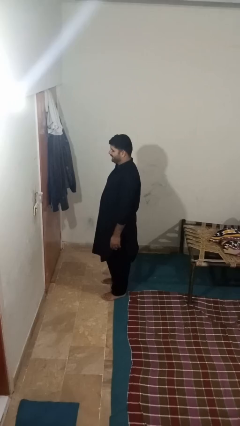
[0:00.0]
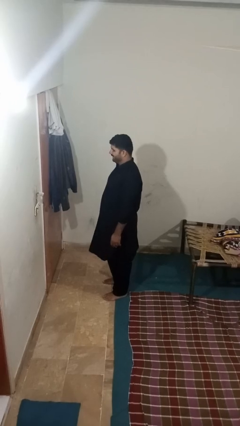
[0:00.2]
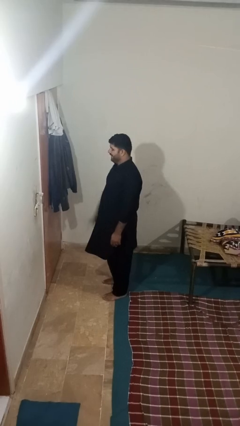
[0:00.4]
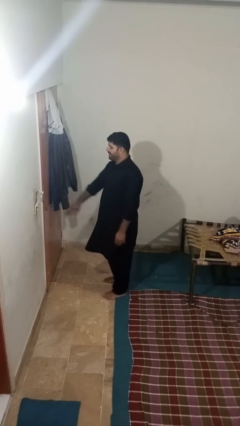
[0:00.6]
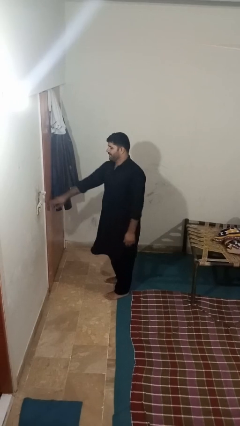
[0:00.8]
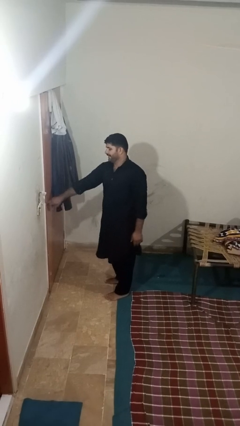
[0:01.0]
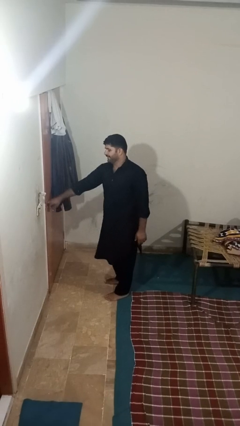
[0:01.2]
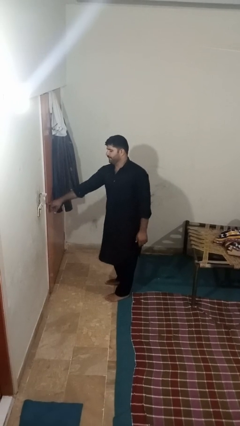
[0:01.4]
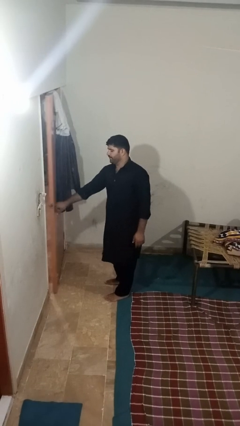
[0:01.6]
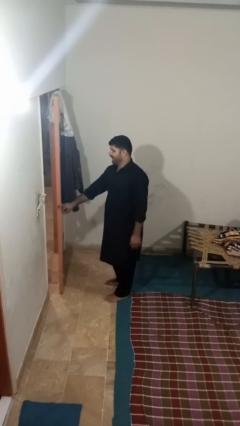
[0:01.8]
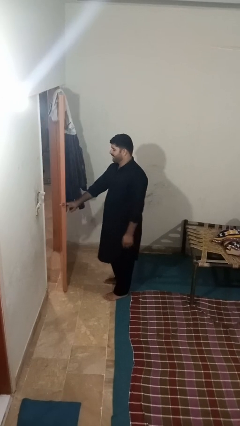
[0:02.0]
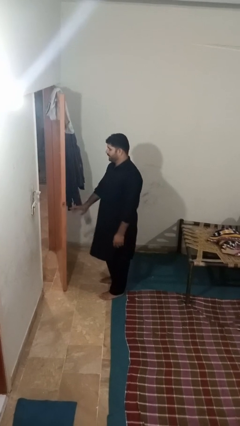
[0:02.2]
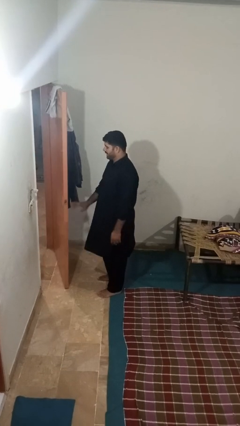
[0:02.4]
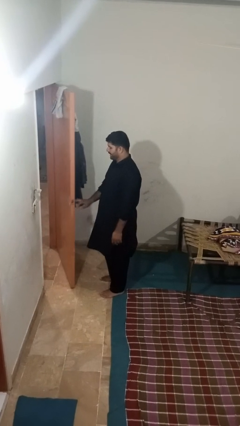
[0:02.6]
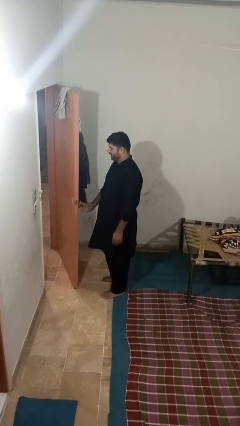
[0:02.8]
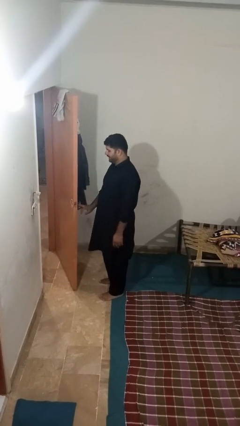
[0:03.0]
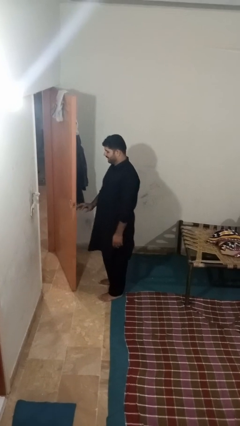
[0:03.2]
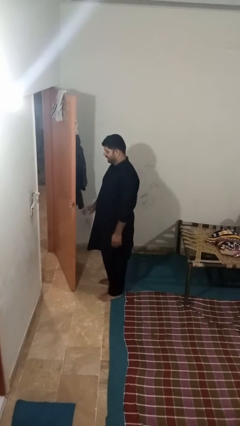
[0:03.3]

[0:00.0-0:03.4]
person opens facility door

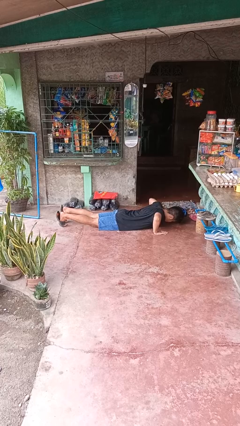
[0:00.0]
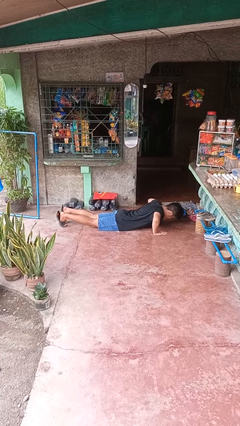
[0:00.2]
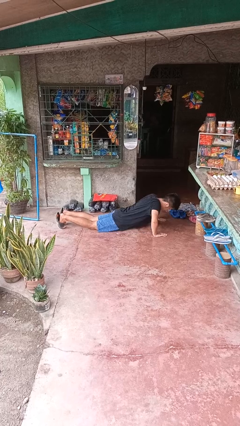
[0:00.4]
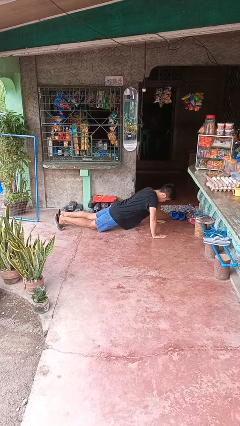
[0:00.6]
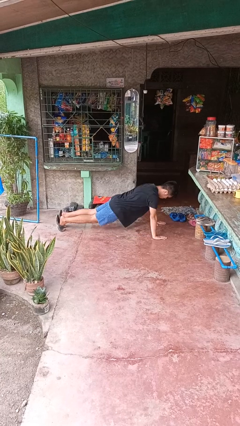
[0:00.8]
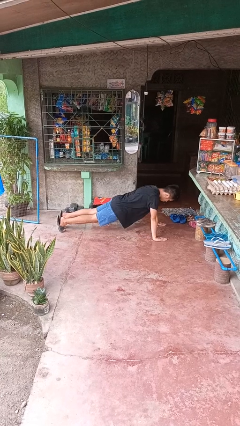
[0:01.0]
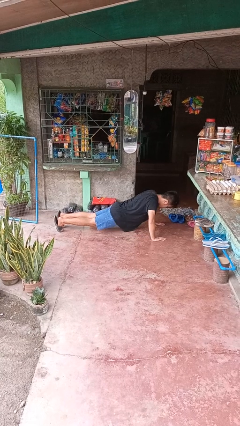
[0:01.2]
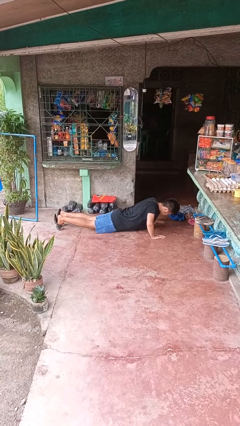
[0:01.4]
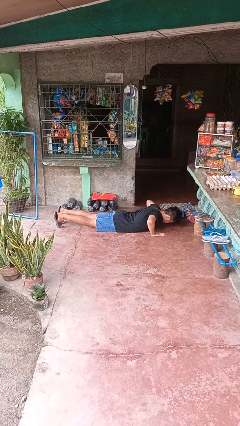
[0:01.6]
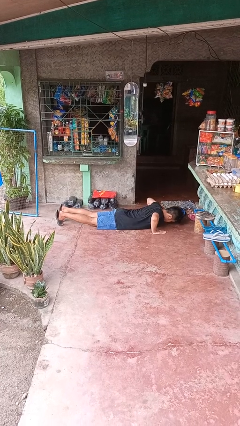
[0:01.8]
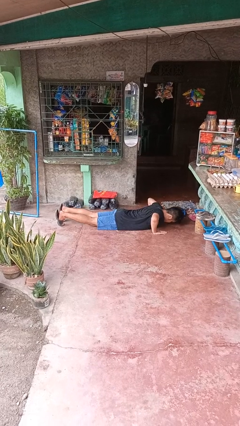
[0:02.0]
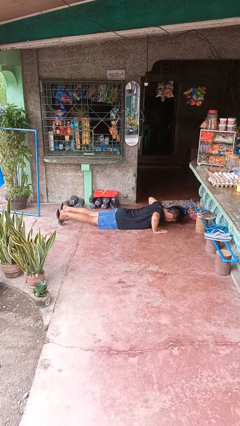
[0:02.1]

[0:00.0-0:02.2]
person exercises with pushup

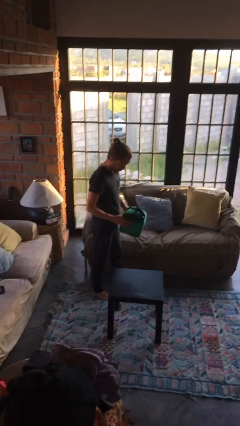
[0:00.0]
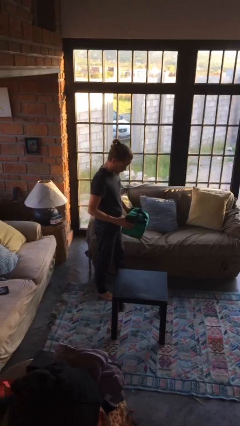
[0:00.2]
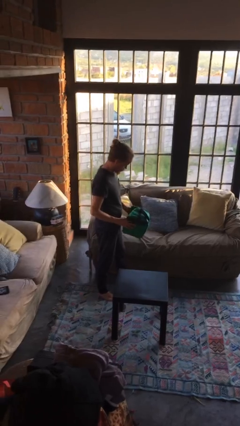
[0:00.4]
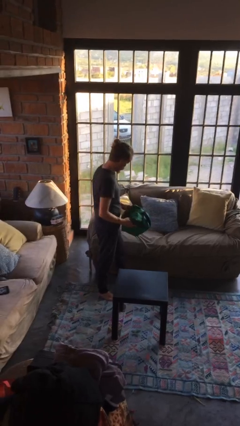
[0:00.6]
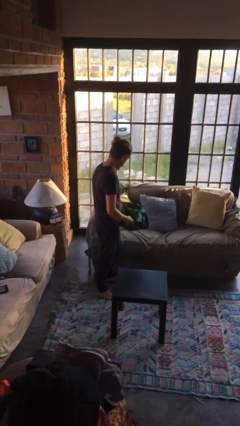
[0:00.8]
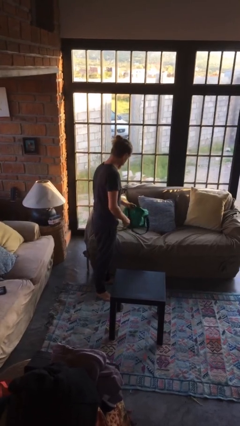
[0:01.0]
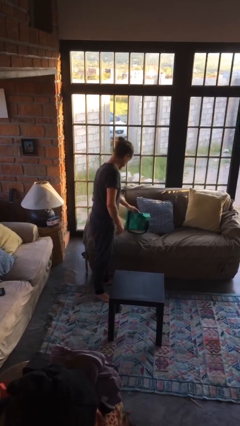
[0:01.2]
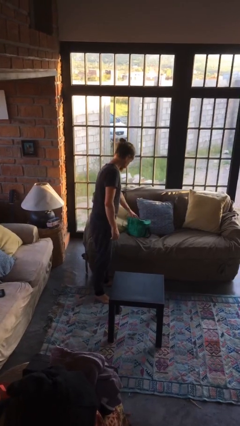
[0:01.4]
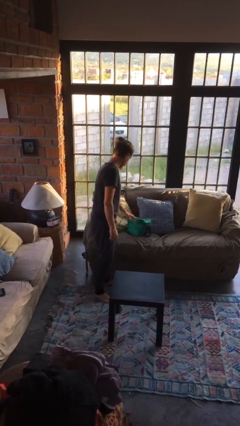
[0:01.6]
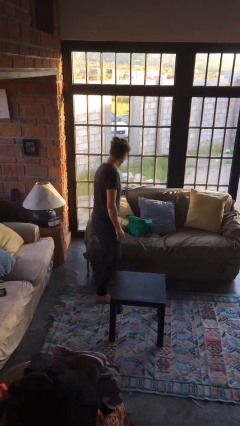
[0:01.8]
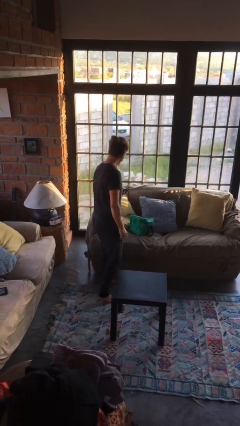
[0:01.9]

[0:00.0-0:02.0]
person puts down object on couch

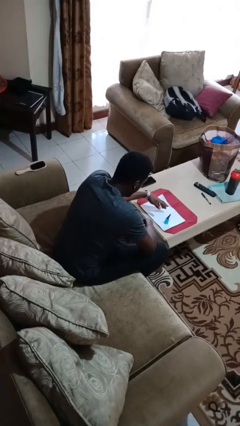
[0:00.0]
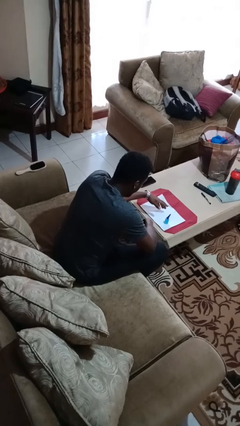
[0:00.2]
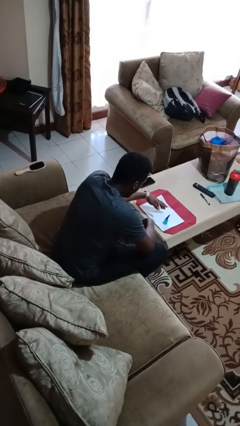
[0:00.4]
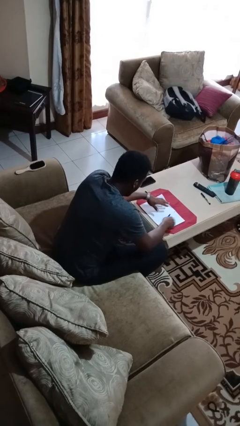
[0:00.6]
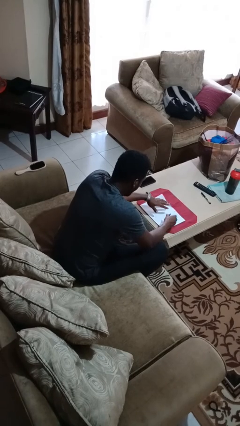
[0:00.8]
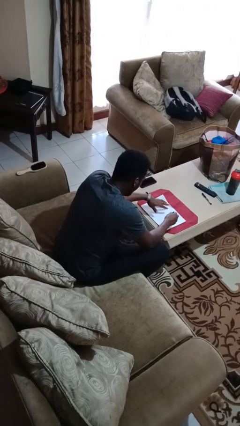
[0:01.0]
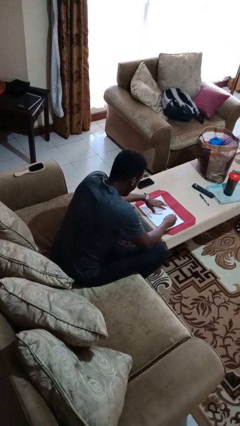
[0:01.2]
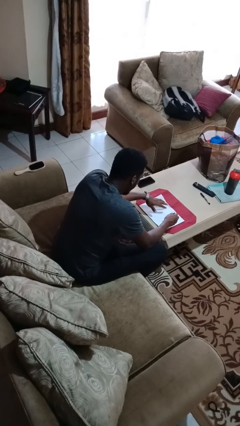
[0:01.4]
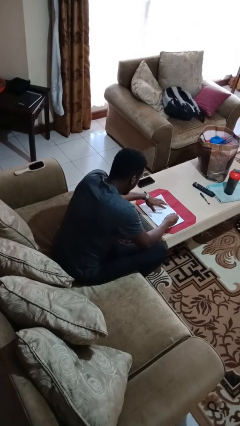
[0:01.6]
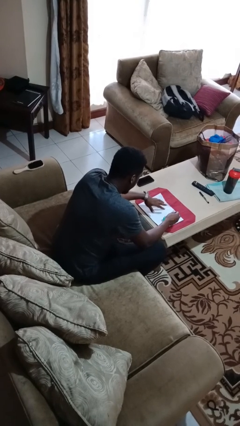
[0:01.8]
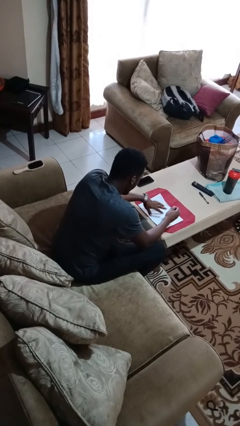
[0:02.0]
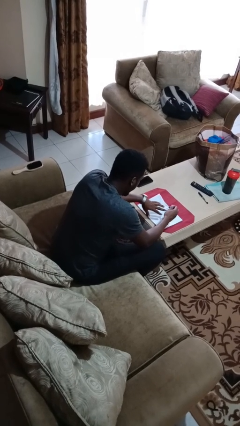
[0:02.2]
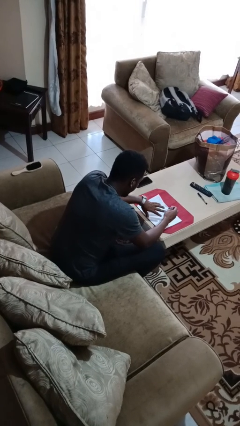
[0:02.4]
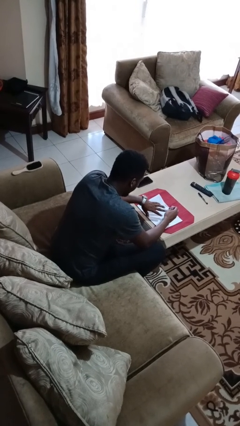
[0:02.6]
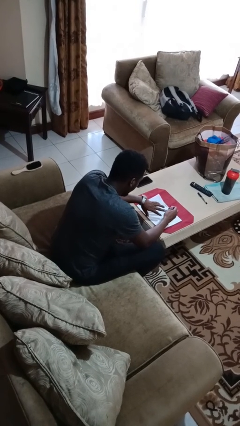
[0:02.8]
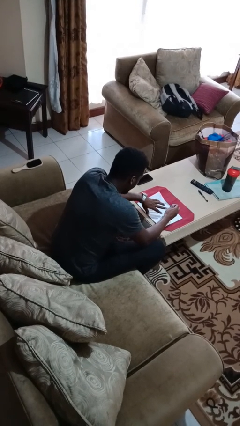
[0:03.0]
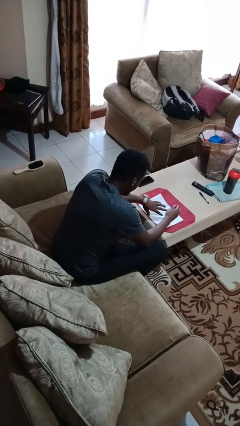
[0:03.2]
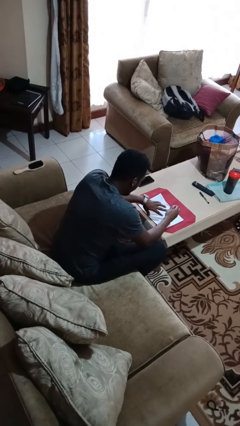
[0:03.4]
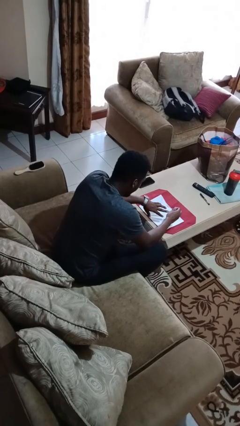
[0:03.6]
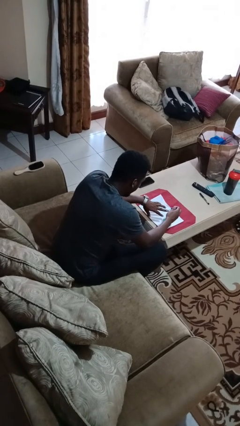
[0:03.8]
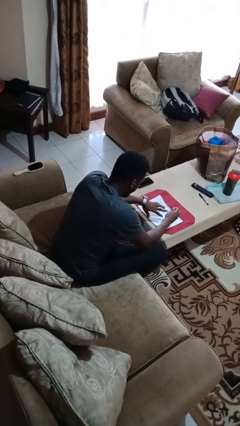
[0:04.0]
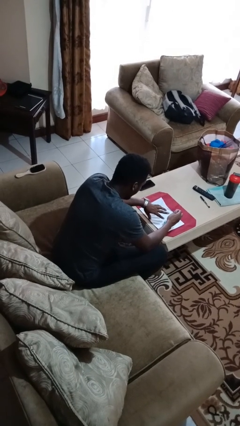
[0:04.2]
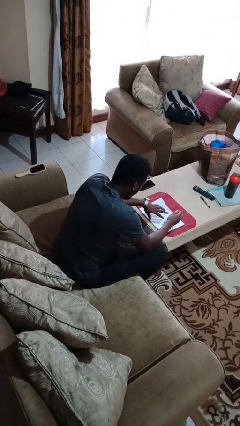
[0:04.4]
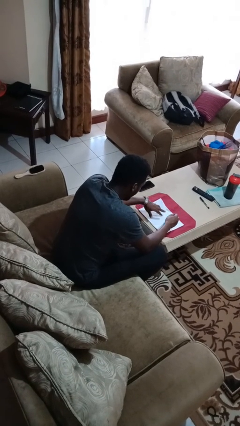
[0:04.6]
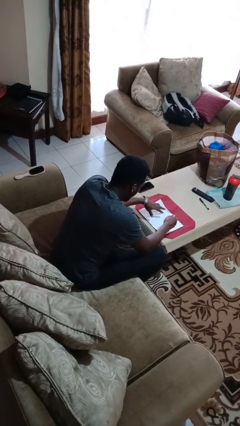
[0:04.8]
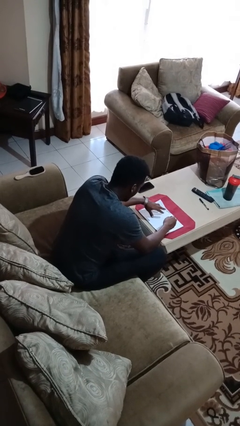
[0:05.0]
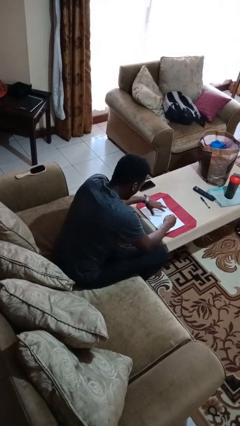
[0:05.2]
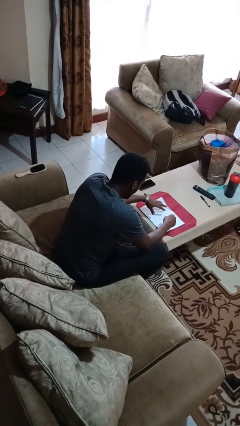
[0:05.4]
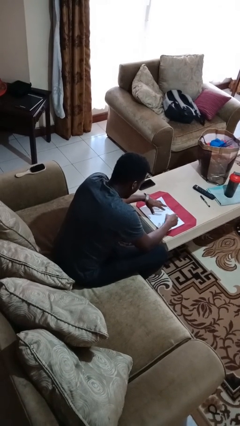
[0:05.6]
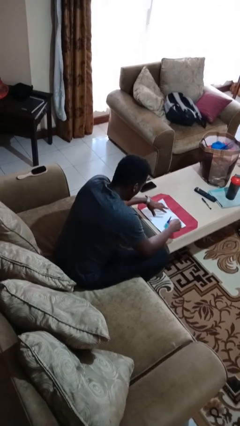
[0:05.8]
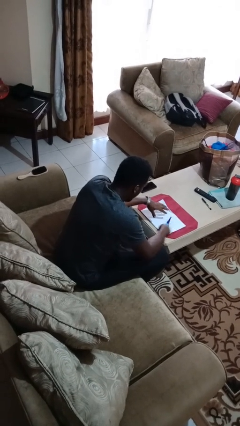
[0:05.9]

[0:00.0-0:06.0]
person paints fingernails

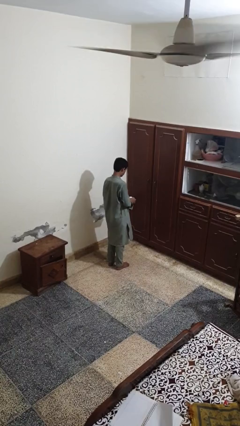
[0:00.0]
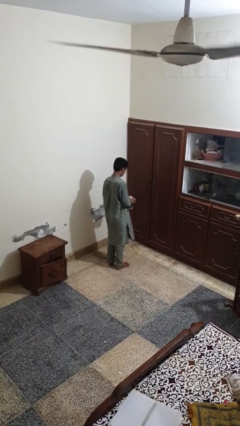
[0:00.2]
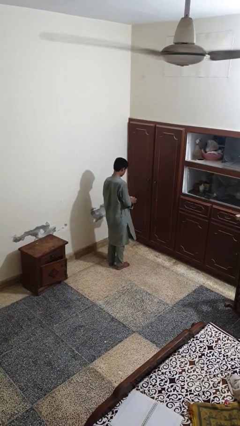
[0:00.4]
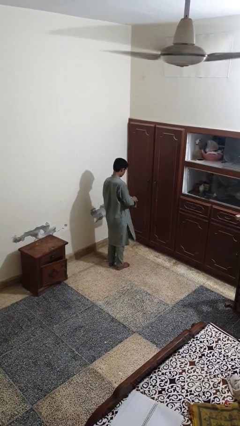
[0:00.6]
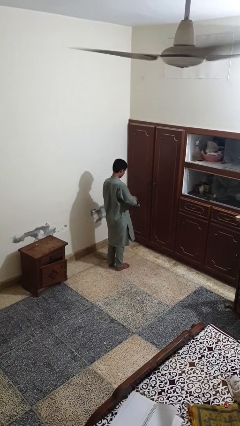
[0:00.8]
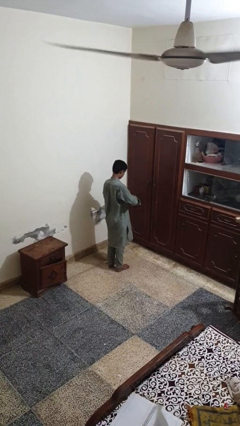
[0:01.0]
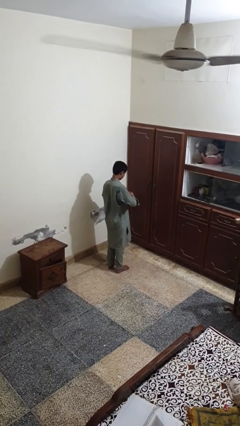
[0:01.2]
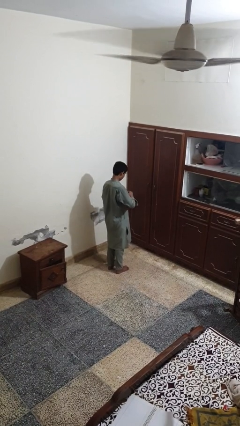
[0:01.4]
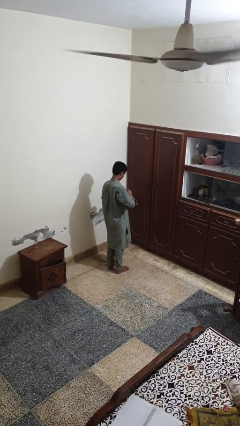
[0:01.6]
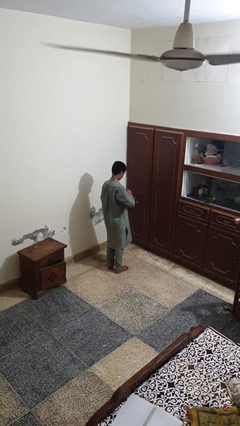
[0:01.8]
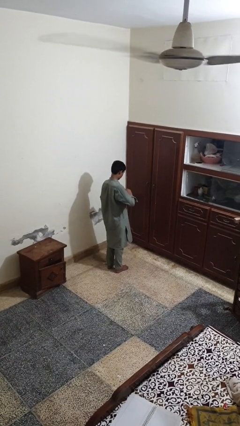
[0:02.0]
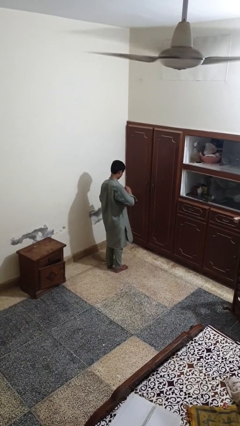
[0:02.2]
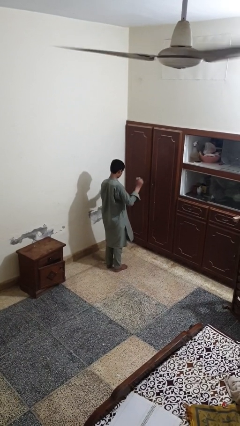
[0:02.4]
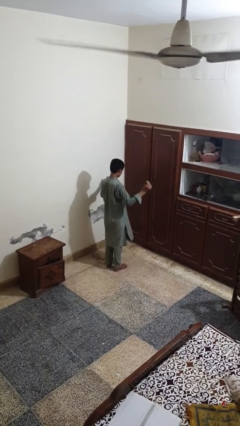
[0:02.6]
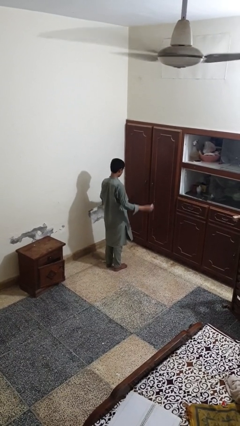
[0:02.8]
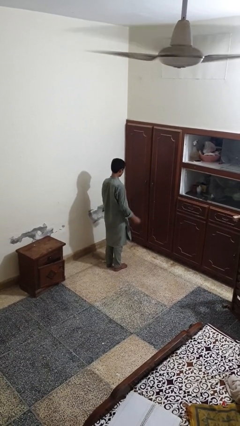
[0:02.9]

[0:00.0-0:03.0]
person tears paper

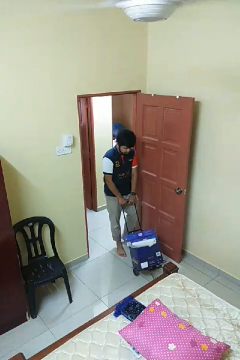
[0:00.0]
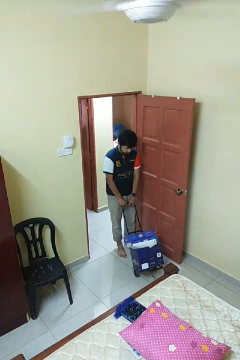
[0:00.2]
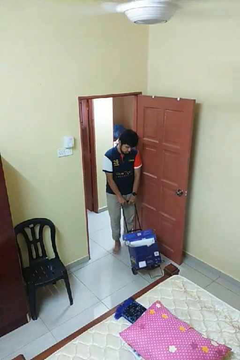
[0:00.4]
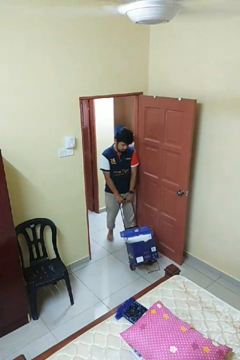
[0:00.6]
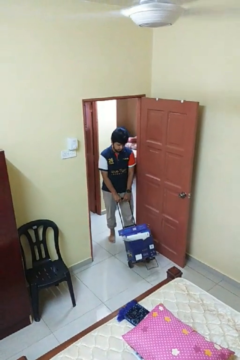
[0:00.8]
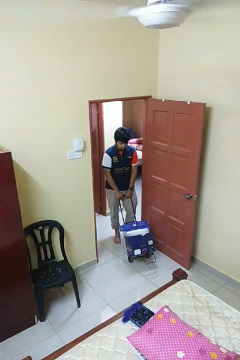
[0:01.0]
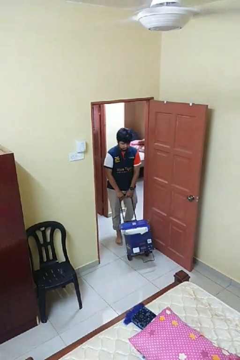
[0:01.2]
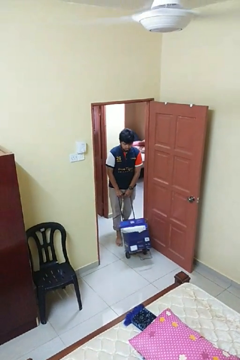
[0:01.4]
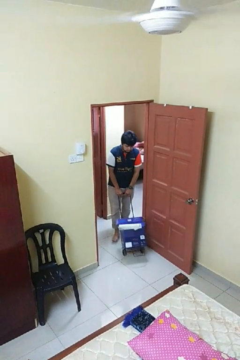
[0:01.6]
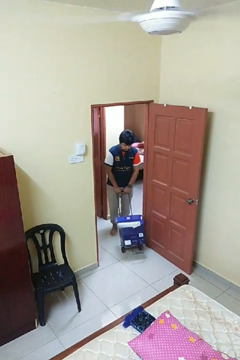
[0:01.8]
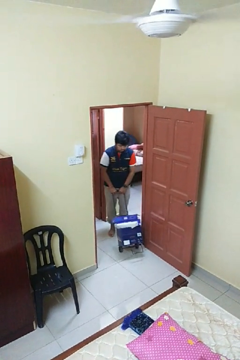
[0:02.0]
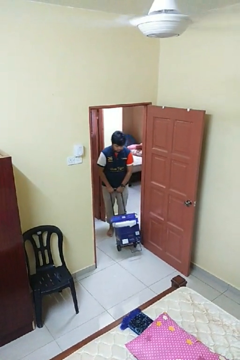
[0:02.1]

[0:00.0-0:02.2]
person pulls wheeled cart
